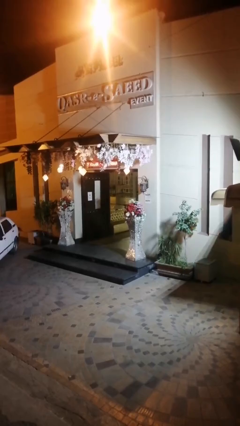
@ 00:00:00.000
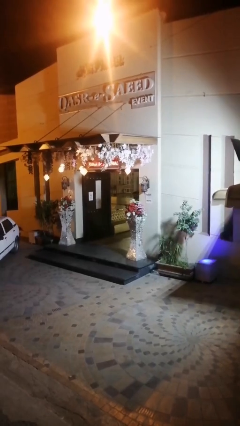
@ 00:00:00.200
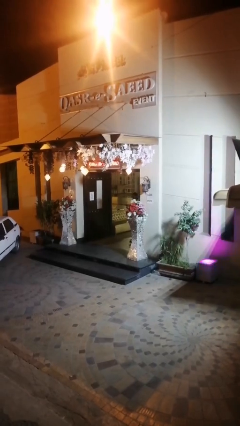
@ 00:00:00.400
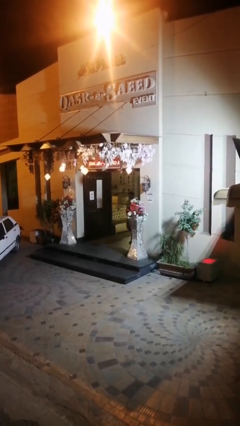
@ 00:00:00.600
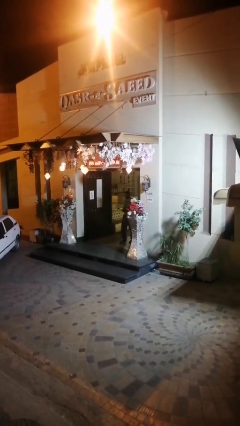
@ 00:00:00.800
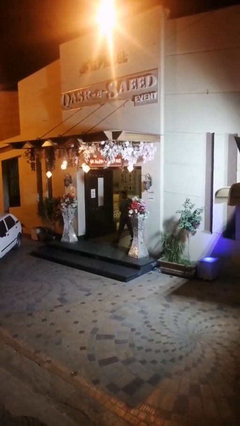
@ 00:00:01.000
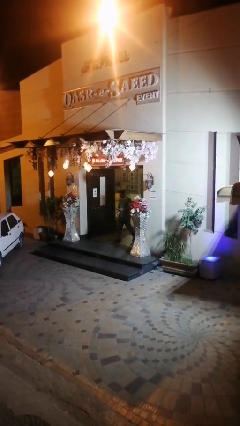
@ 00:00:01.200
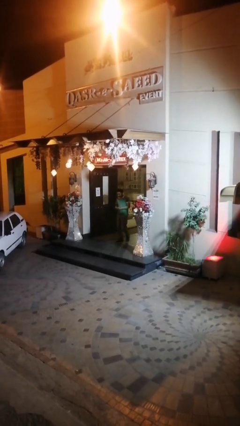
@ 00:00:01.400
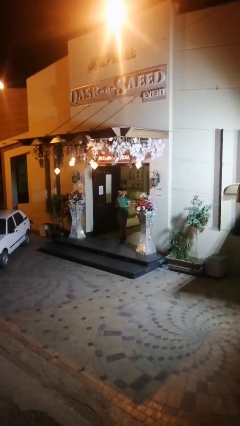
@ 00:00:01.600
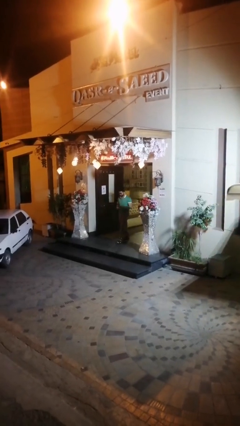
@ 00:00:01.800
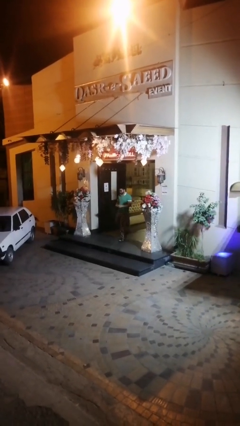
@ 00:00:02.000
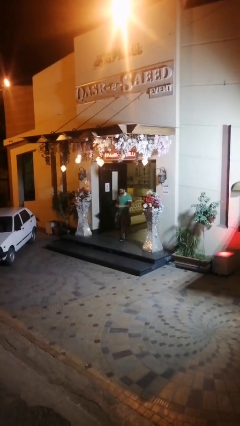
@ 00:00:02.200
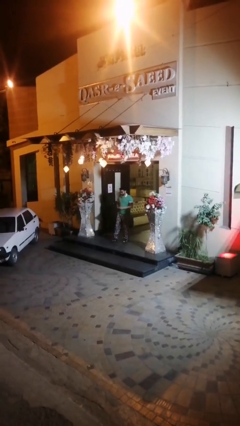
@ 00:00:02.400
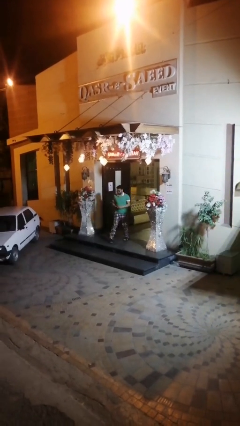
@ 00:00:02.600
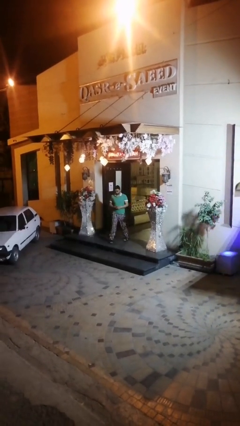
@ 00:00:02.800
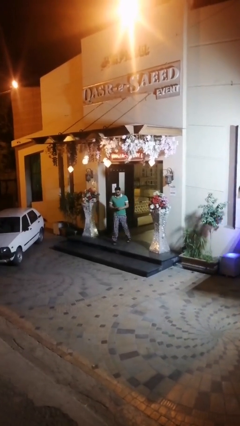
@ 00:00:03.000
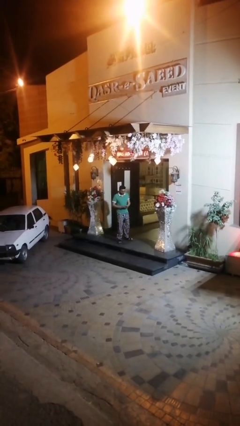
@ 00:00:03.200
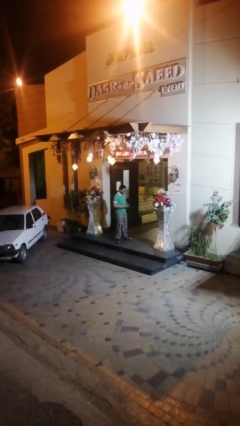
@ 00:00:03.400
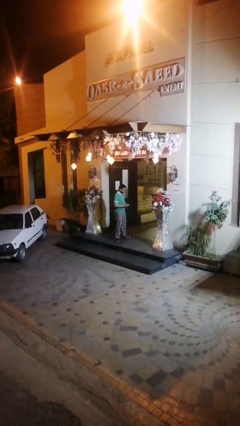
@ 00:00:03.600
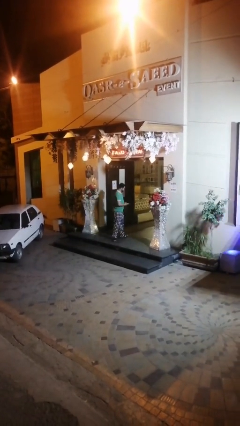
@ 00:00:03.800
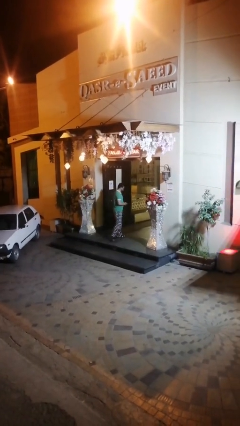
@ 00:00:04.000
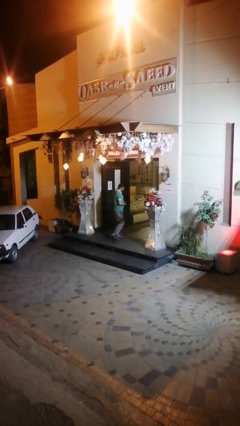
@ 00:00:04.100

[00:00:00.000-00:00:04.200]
person enters scene through structure

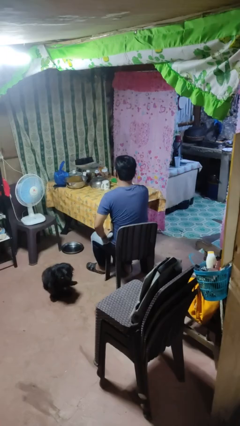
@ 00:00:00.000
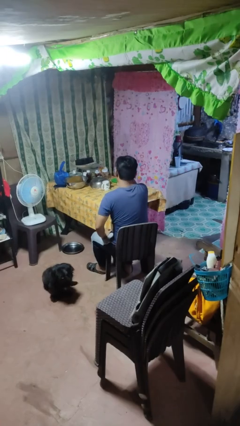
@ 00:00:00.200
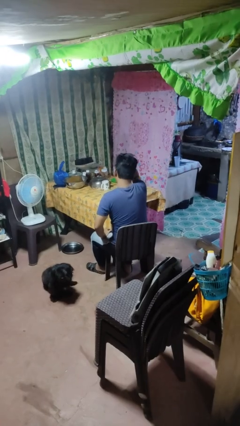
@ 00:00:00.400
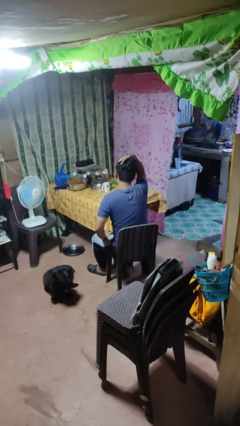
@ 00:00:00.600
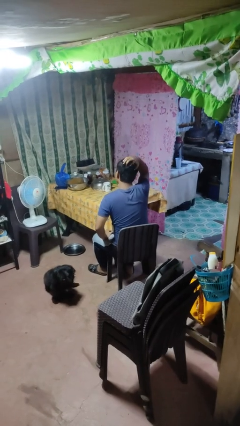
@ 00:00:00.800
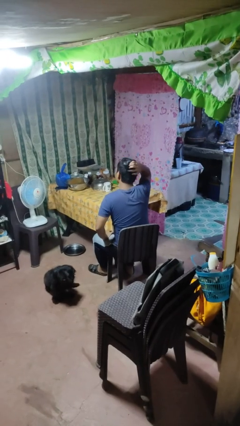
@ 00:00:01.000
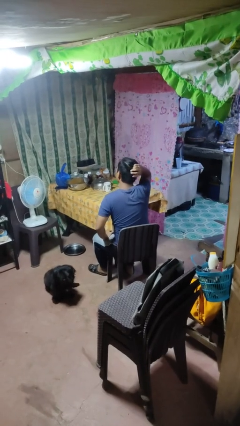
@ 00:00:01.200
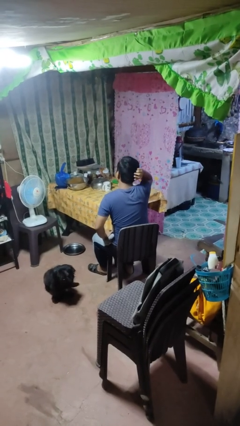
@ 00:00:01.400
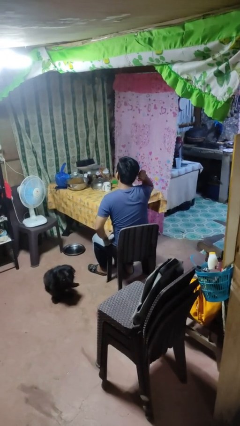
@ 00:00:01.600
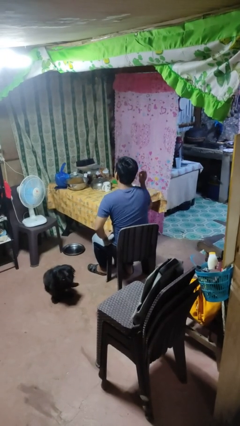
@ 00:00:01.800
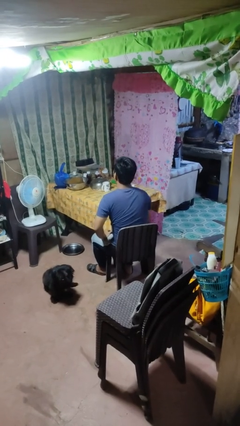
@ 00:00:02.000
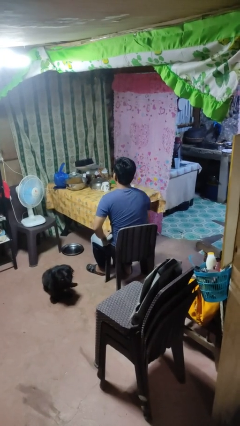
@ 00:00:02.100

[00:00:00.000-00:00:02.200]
person strokes hair

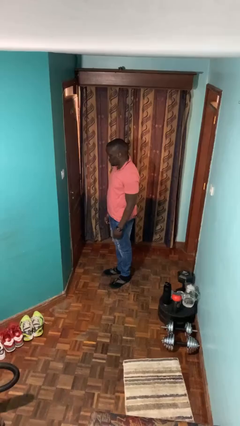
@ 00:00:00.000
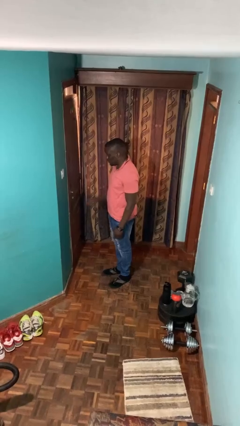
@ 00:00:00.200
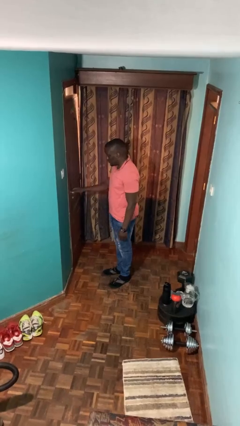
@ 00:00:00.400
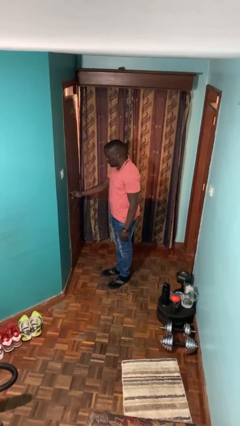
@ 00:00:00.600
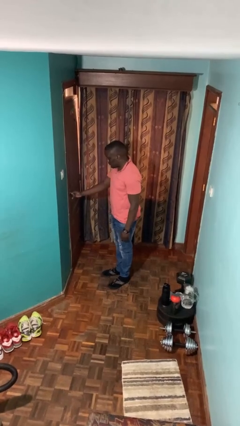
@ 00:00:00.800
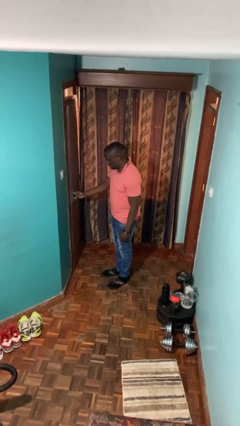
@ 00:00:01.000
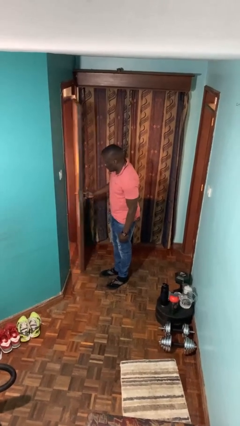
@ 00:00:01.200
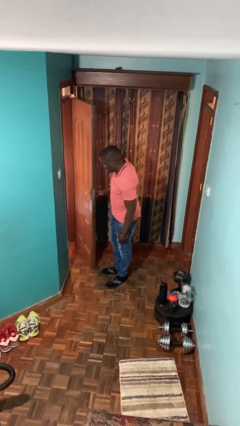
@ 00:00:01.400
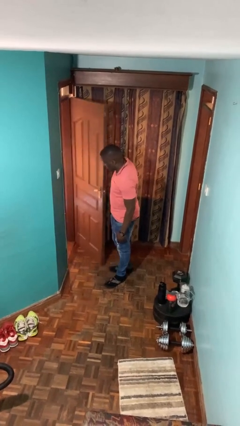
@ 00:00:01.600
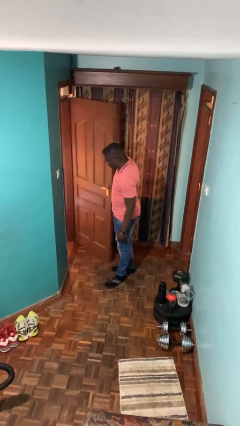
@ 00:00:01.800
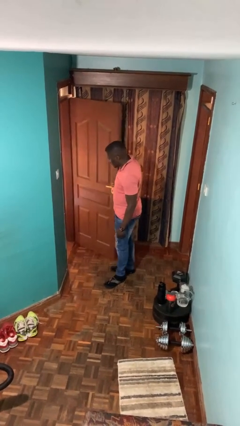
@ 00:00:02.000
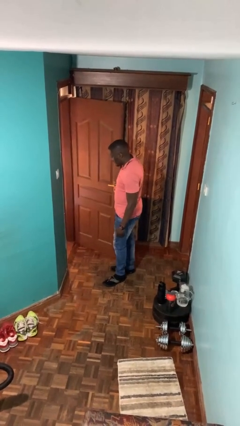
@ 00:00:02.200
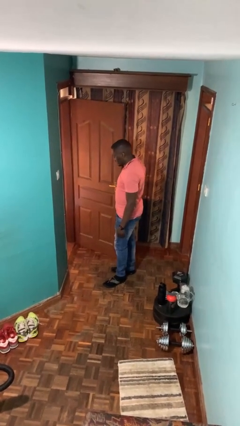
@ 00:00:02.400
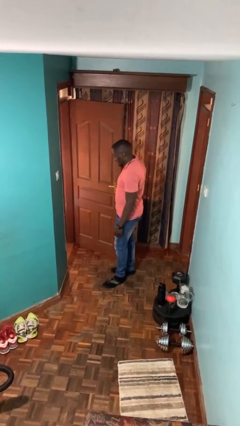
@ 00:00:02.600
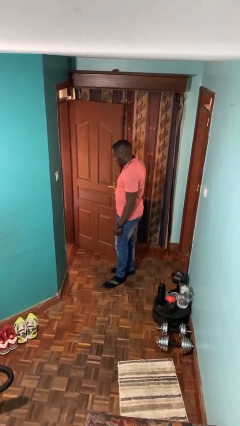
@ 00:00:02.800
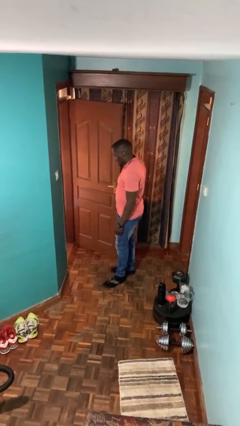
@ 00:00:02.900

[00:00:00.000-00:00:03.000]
person opens facility door

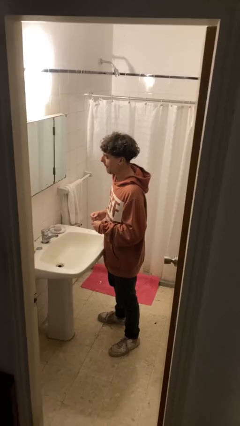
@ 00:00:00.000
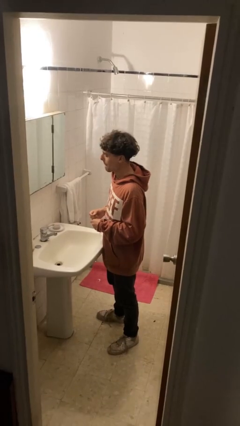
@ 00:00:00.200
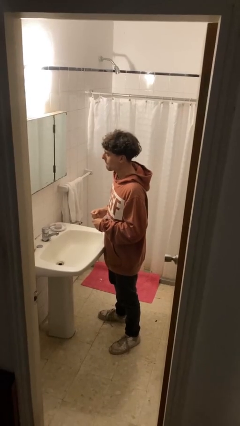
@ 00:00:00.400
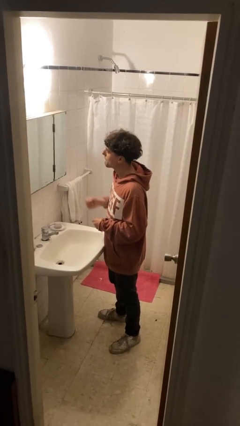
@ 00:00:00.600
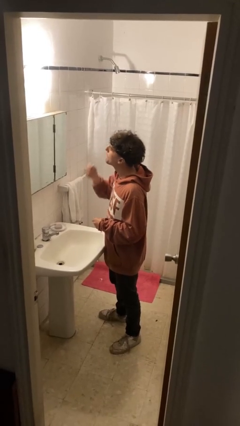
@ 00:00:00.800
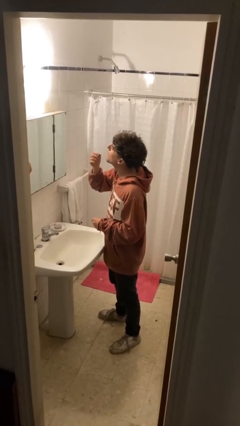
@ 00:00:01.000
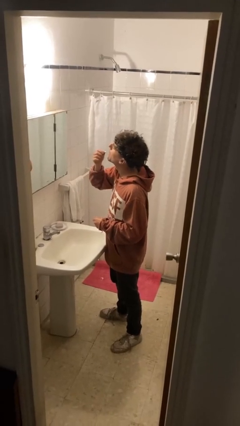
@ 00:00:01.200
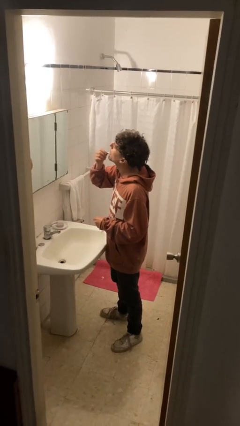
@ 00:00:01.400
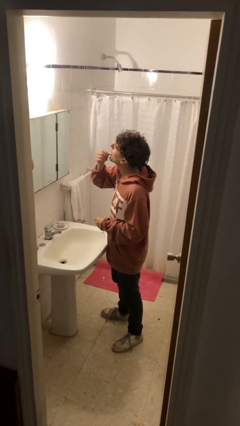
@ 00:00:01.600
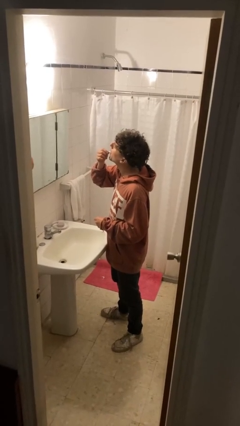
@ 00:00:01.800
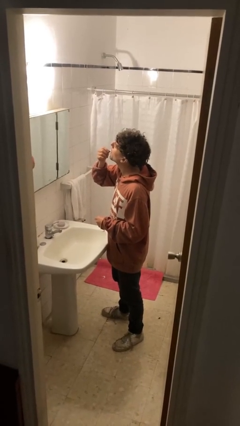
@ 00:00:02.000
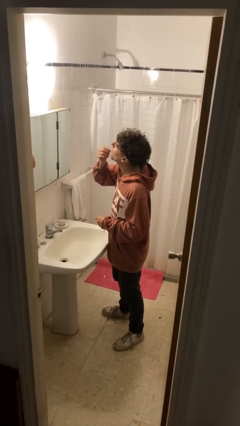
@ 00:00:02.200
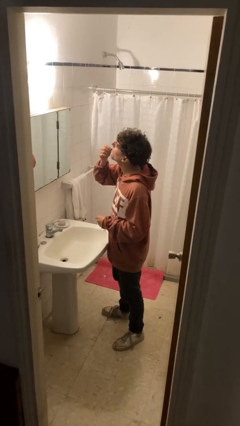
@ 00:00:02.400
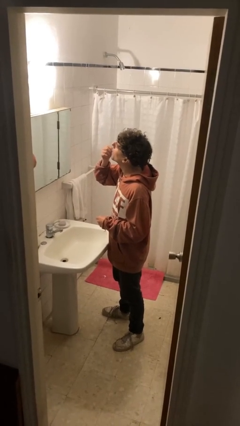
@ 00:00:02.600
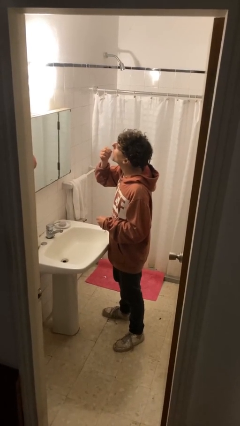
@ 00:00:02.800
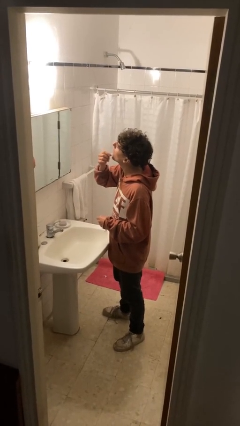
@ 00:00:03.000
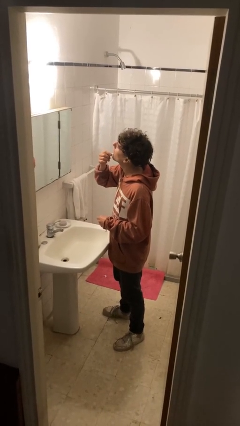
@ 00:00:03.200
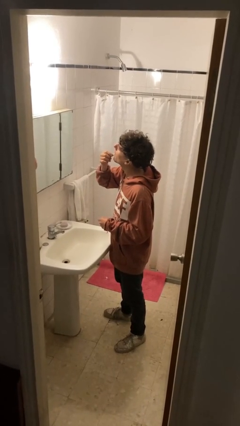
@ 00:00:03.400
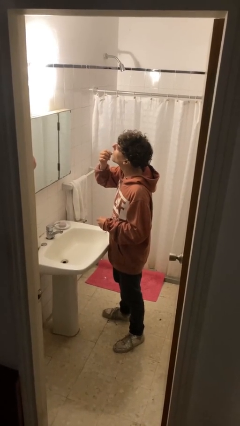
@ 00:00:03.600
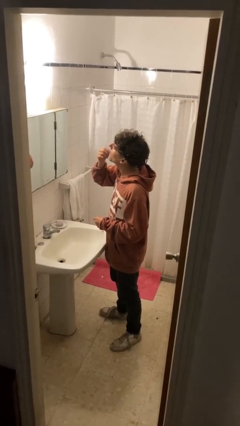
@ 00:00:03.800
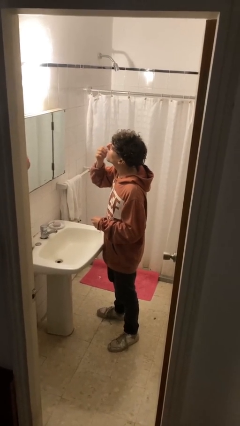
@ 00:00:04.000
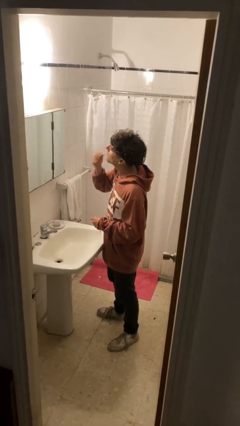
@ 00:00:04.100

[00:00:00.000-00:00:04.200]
person applies lip makeup

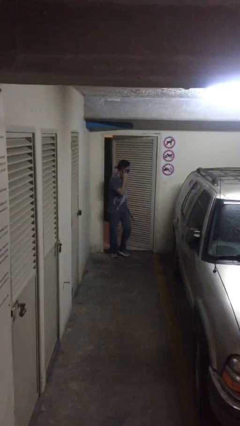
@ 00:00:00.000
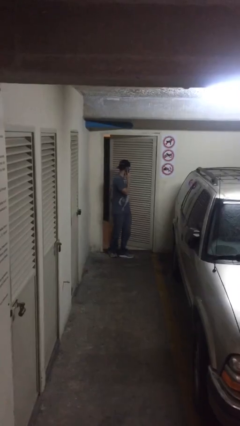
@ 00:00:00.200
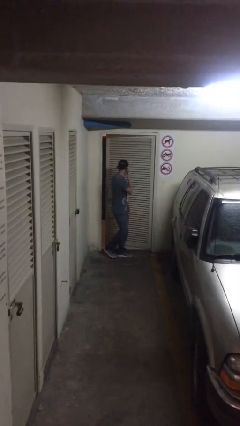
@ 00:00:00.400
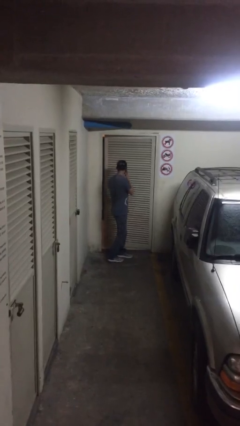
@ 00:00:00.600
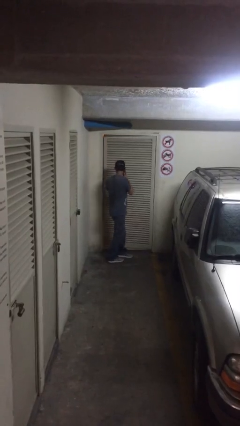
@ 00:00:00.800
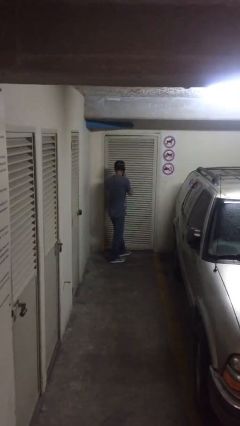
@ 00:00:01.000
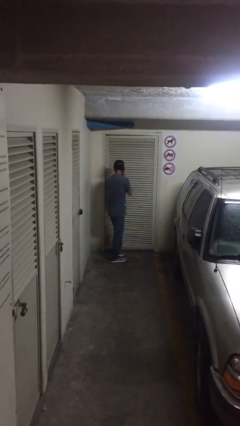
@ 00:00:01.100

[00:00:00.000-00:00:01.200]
person closes facility door

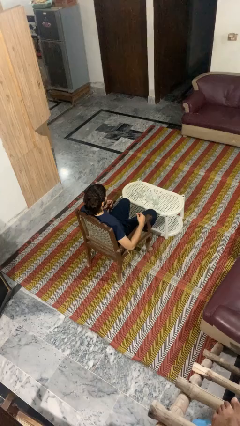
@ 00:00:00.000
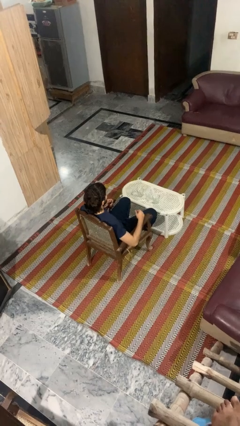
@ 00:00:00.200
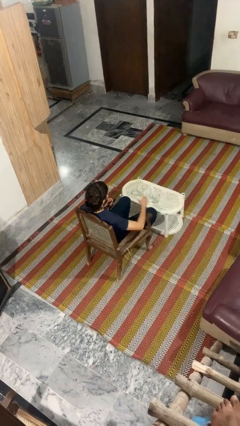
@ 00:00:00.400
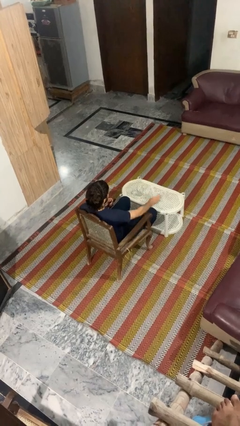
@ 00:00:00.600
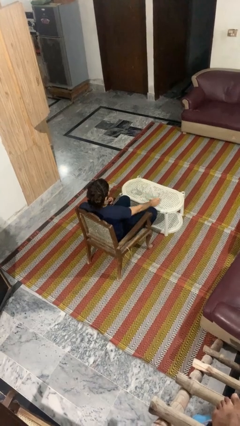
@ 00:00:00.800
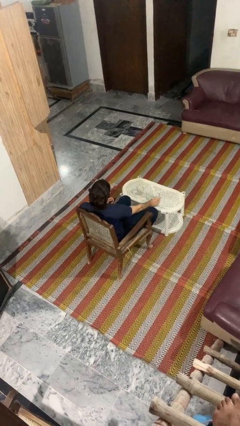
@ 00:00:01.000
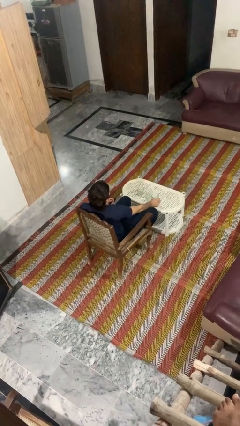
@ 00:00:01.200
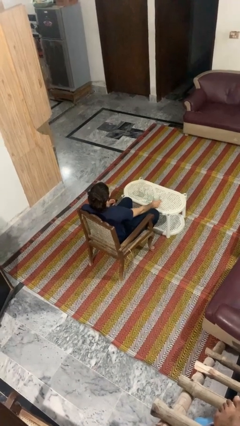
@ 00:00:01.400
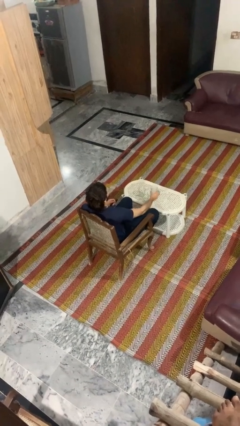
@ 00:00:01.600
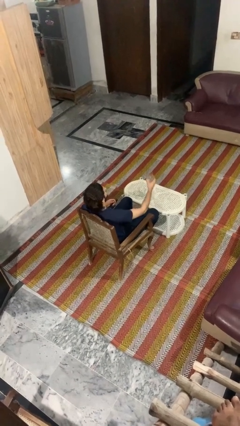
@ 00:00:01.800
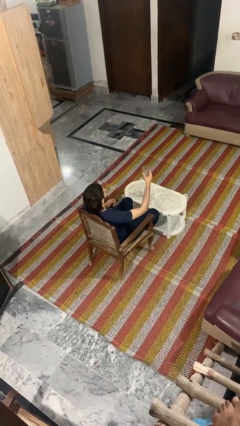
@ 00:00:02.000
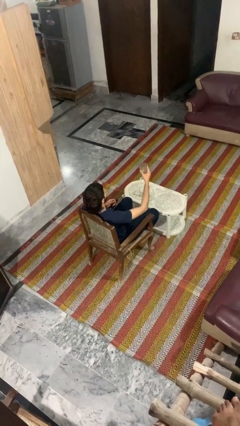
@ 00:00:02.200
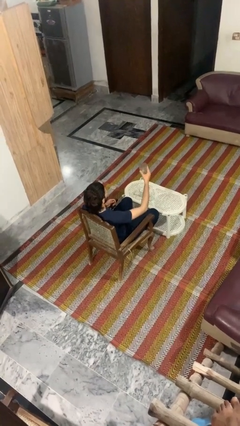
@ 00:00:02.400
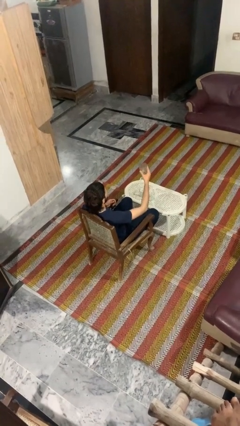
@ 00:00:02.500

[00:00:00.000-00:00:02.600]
person picks up object from table
